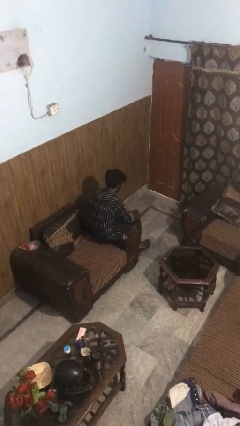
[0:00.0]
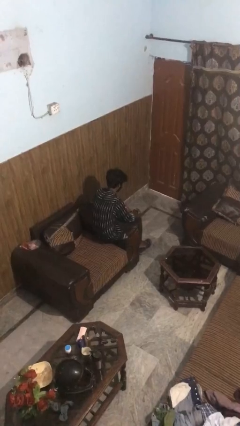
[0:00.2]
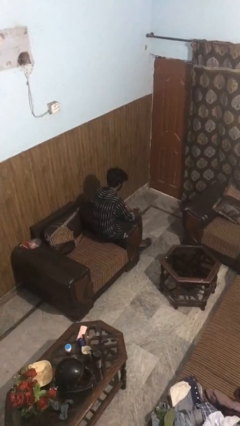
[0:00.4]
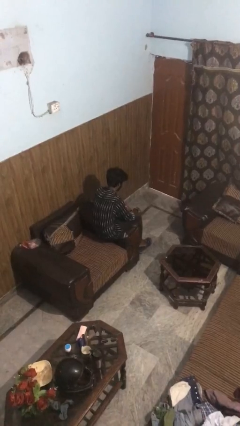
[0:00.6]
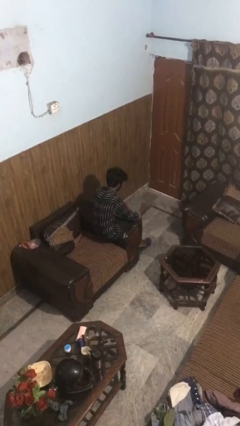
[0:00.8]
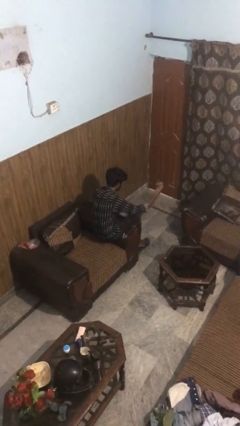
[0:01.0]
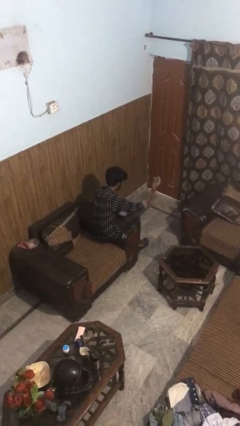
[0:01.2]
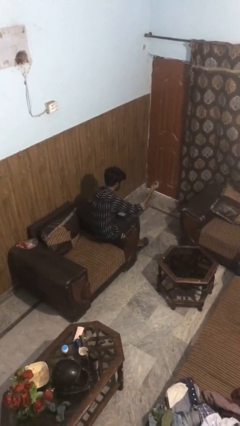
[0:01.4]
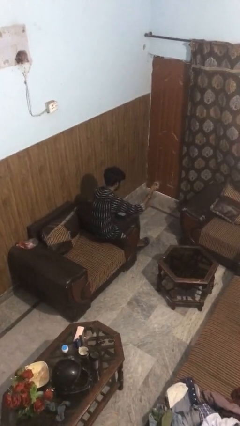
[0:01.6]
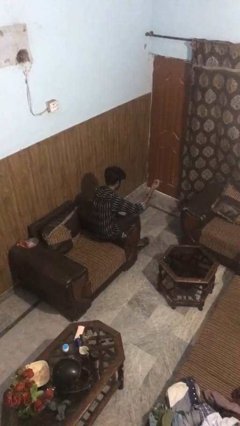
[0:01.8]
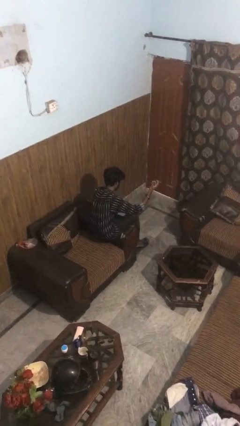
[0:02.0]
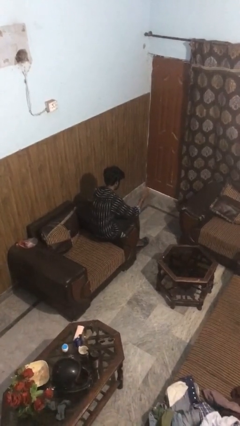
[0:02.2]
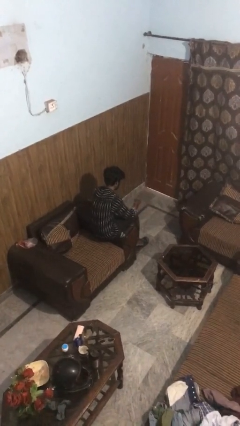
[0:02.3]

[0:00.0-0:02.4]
person snaps fingers

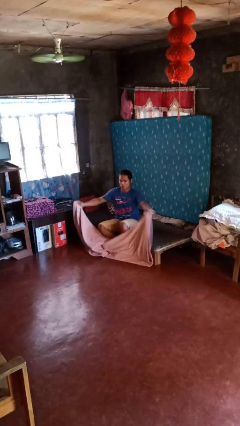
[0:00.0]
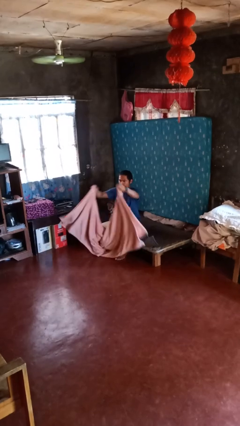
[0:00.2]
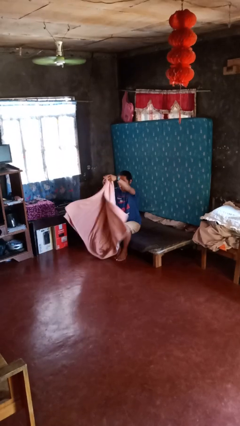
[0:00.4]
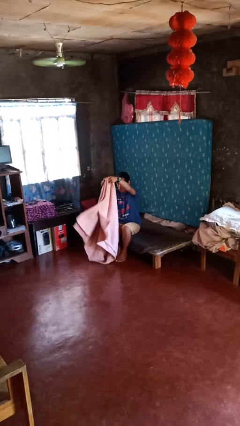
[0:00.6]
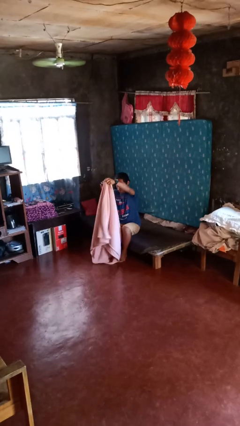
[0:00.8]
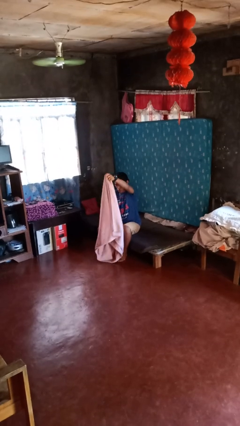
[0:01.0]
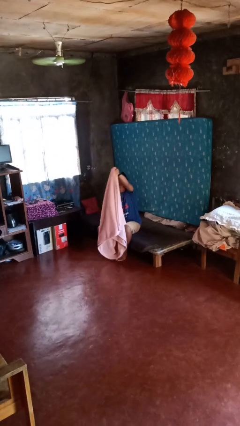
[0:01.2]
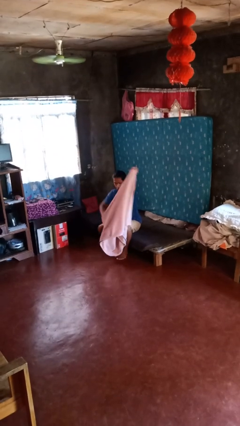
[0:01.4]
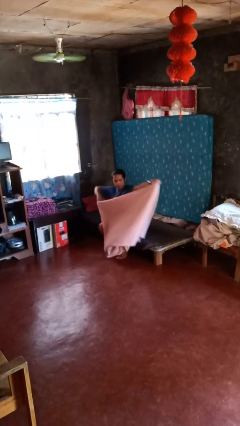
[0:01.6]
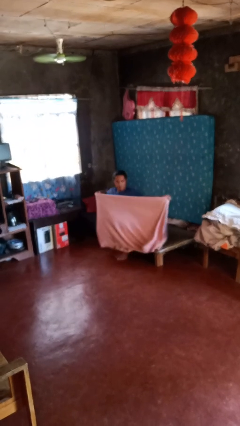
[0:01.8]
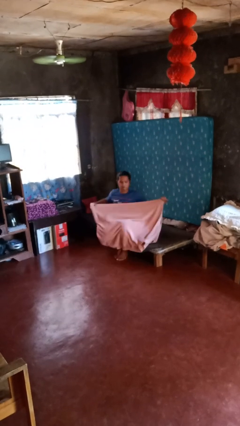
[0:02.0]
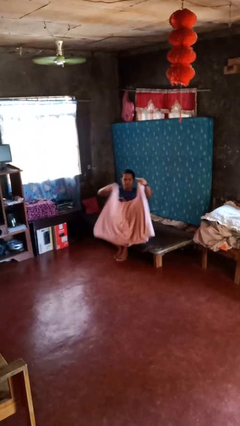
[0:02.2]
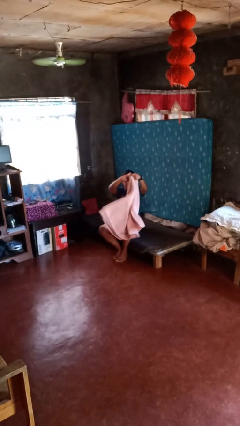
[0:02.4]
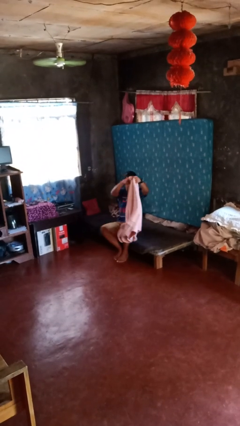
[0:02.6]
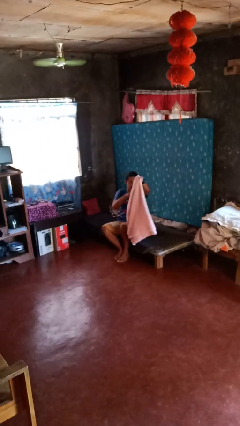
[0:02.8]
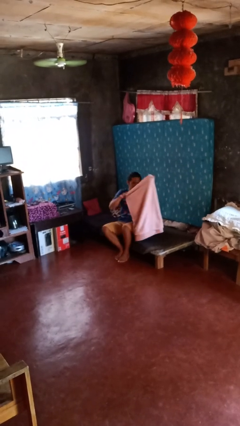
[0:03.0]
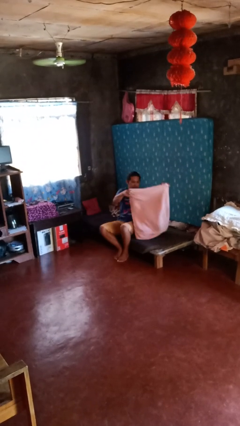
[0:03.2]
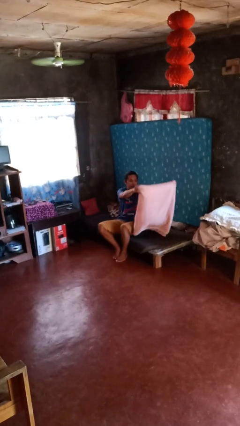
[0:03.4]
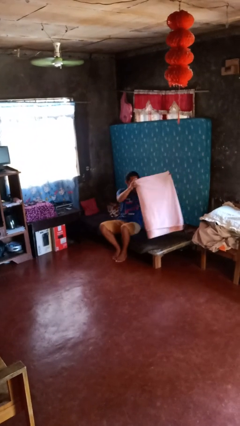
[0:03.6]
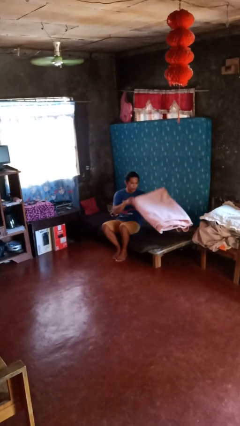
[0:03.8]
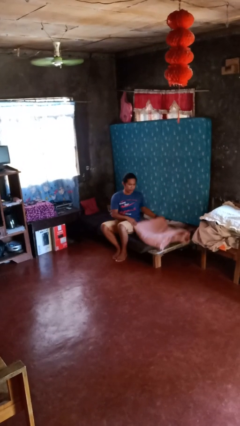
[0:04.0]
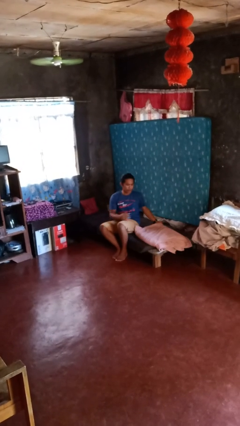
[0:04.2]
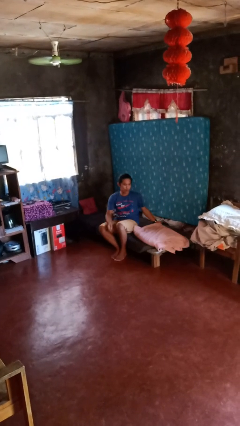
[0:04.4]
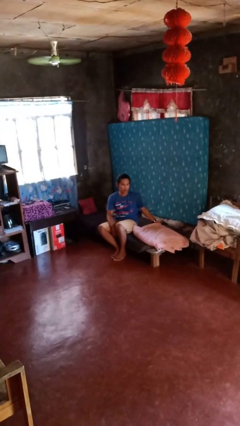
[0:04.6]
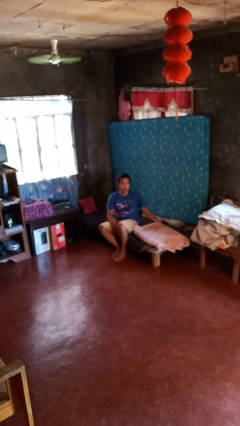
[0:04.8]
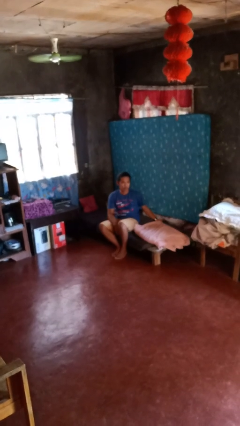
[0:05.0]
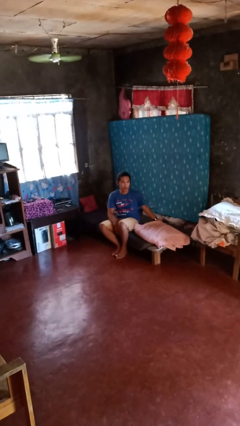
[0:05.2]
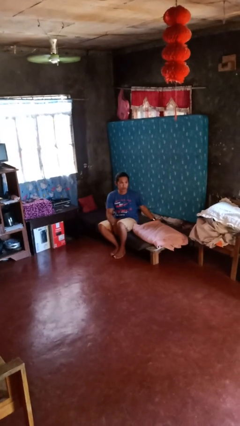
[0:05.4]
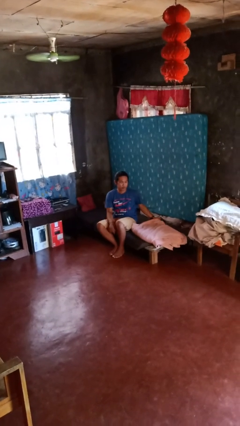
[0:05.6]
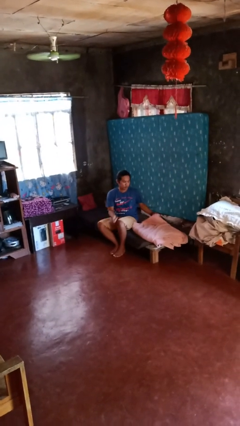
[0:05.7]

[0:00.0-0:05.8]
person folds blanket

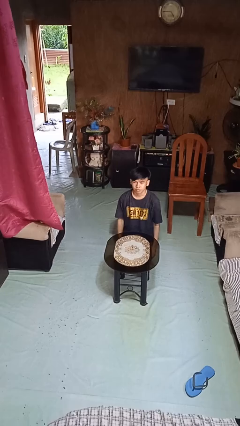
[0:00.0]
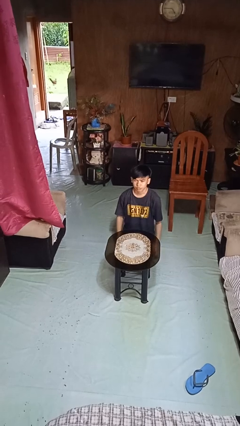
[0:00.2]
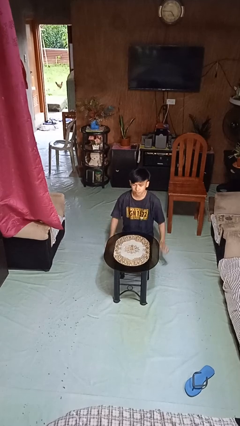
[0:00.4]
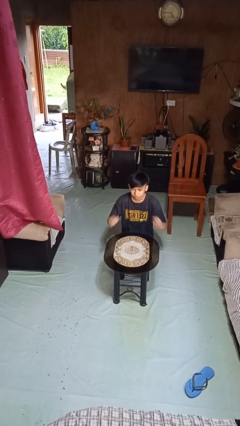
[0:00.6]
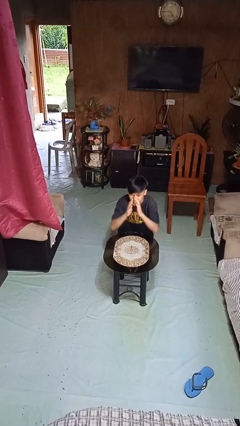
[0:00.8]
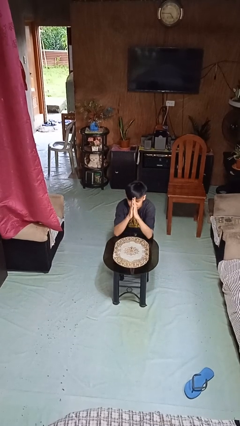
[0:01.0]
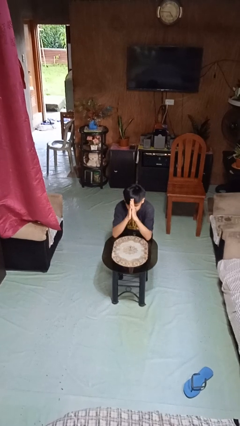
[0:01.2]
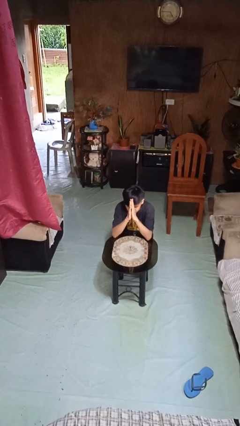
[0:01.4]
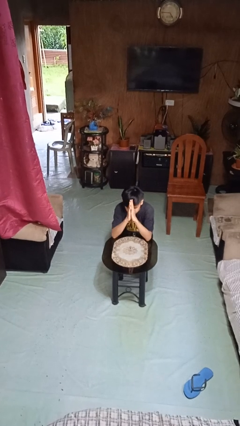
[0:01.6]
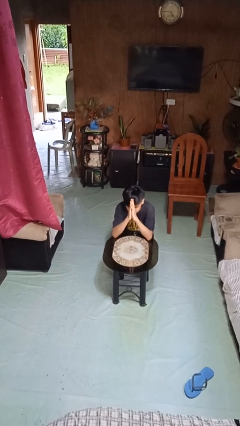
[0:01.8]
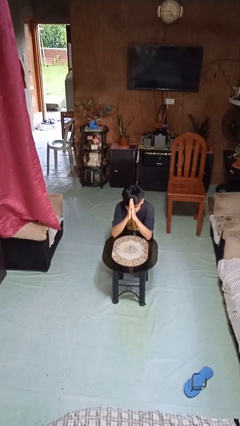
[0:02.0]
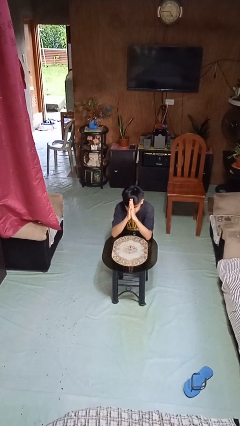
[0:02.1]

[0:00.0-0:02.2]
person prays

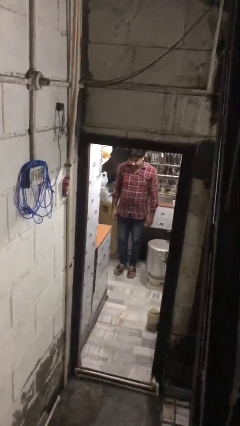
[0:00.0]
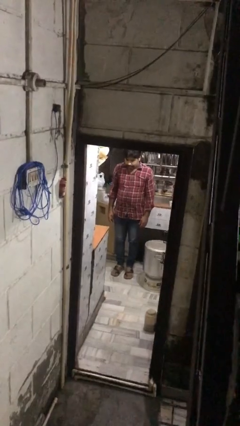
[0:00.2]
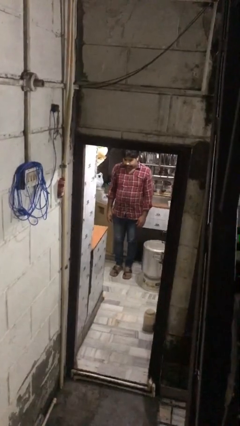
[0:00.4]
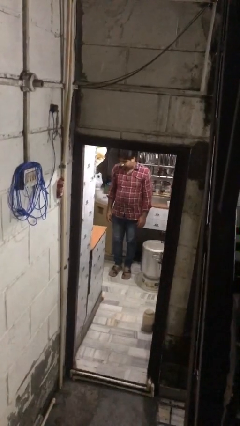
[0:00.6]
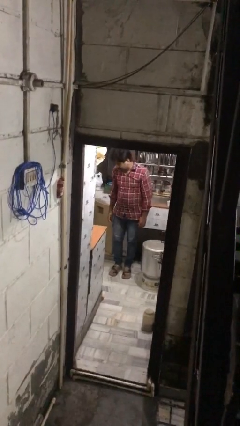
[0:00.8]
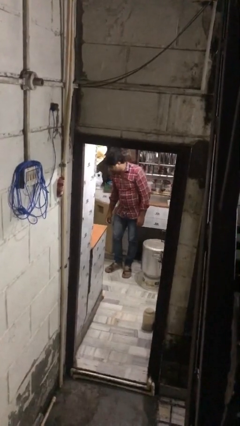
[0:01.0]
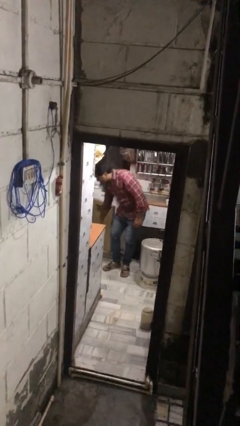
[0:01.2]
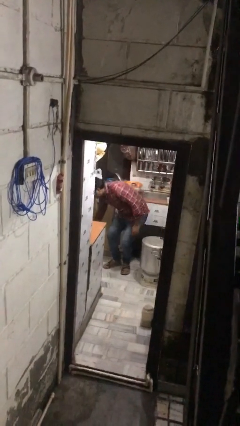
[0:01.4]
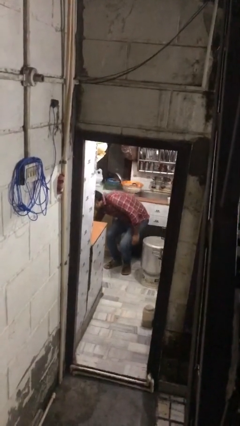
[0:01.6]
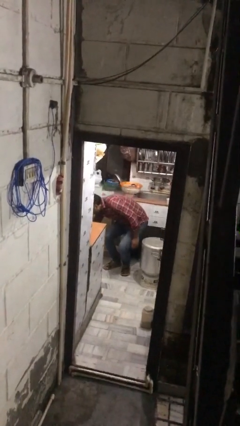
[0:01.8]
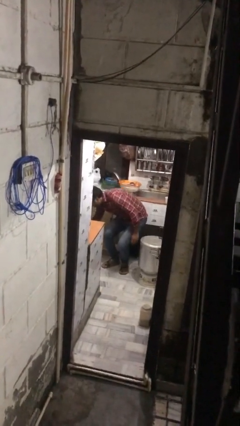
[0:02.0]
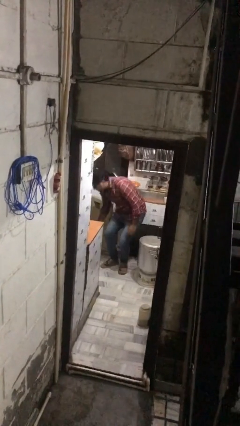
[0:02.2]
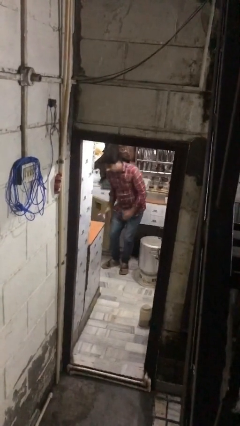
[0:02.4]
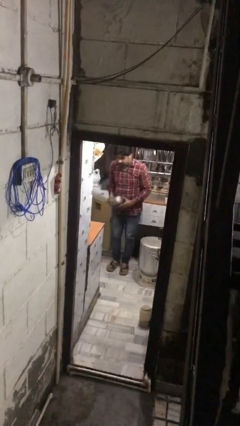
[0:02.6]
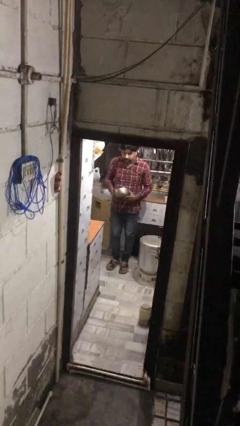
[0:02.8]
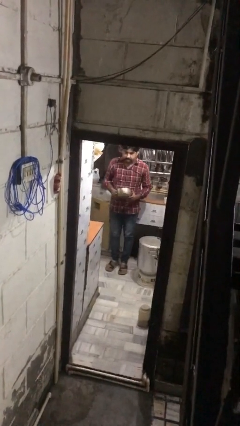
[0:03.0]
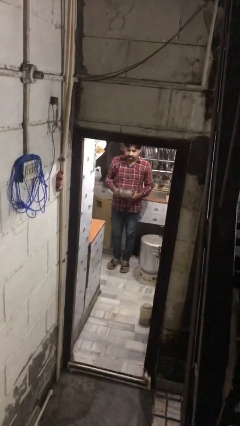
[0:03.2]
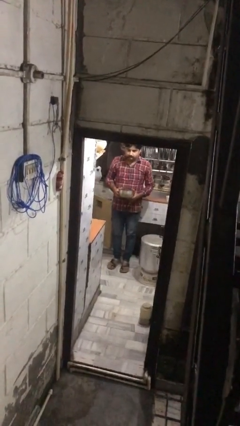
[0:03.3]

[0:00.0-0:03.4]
person takes object from kitchen drawer

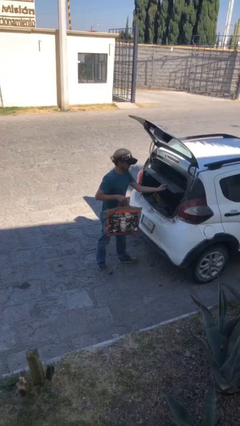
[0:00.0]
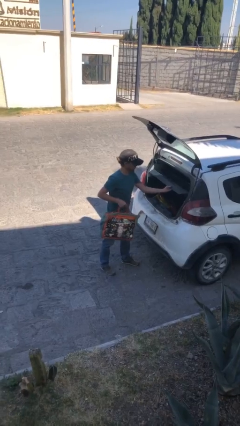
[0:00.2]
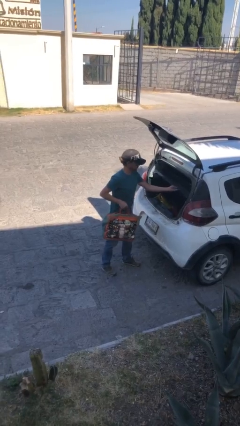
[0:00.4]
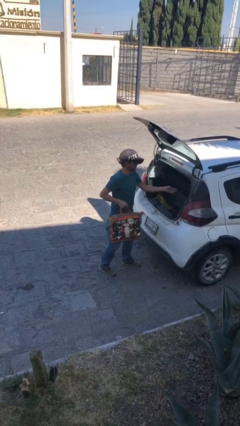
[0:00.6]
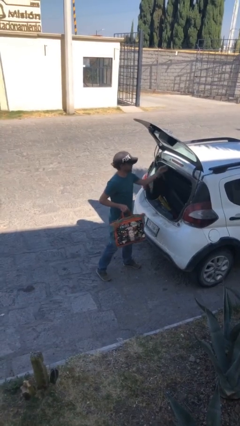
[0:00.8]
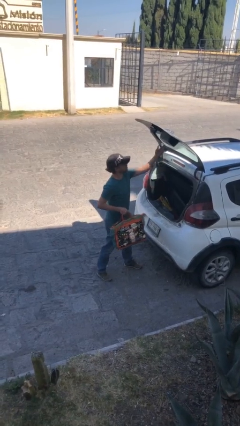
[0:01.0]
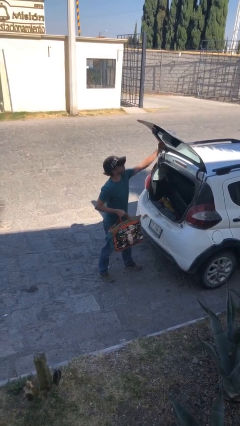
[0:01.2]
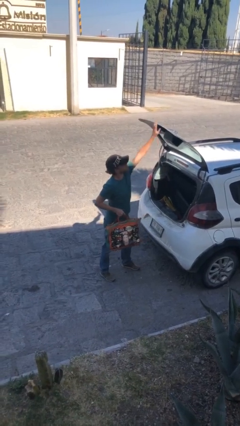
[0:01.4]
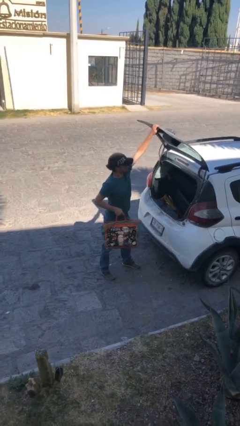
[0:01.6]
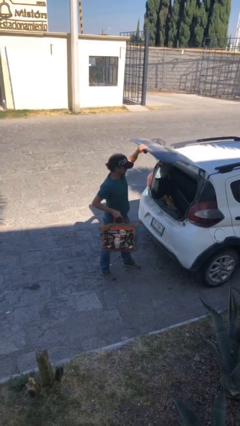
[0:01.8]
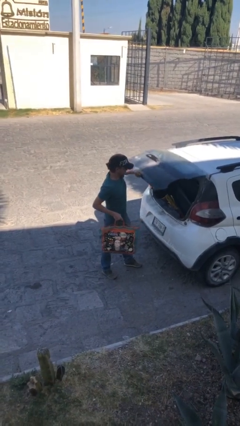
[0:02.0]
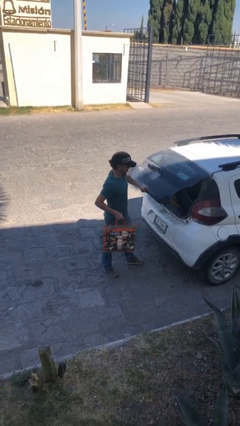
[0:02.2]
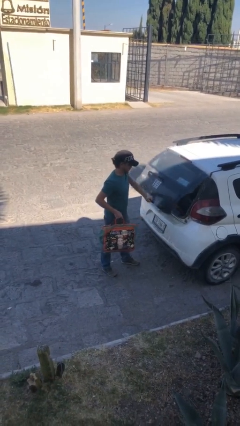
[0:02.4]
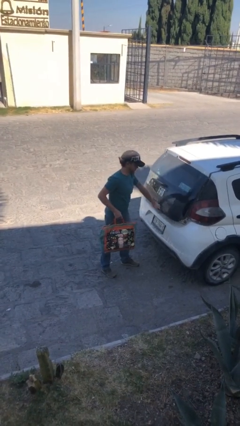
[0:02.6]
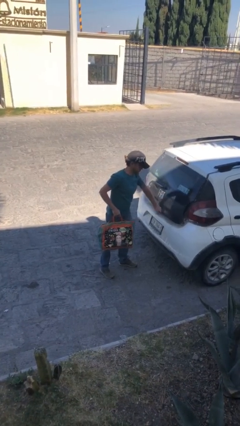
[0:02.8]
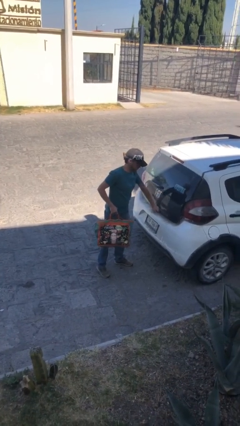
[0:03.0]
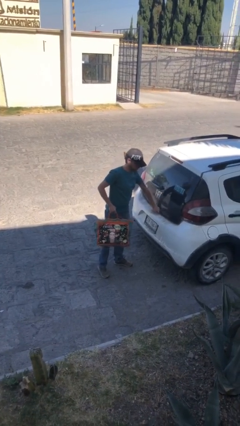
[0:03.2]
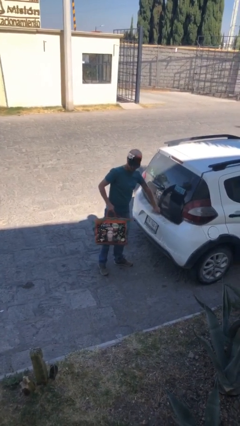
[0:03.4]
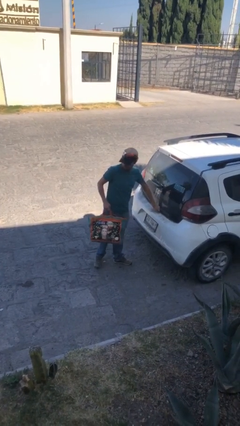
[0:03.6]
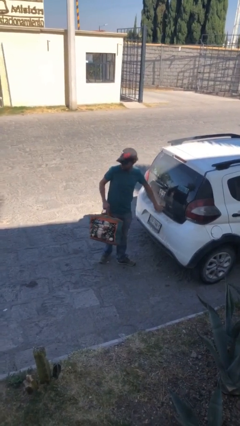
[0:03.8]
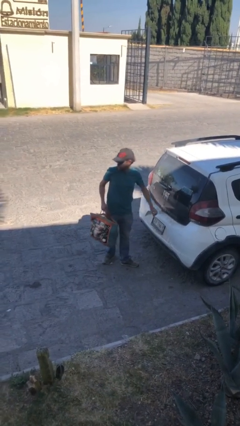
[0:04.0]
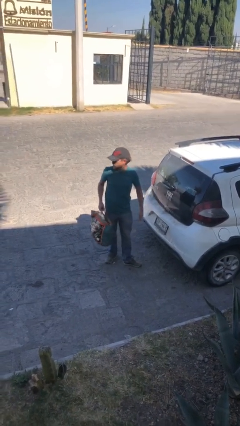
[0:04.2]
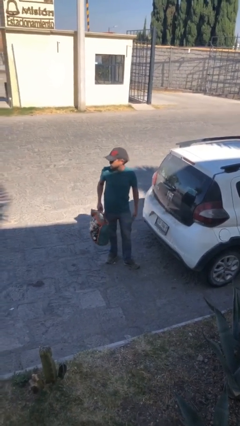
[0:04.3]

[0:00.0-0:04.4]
person closes car trunk
